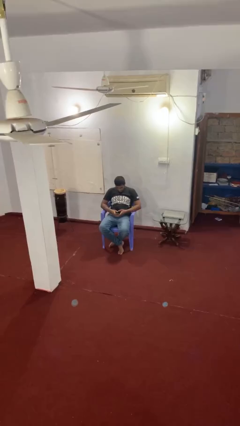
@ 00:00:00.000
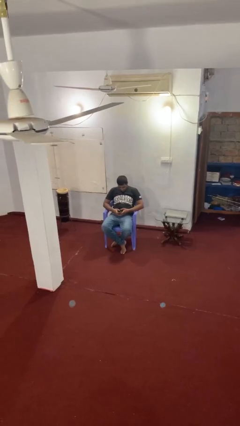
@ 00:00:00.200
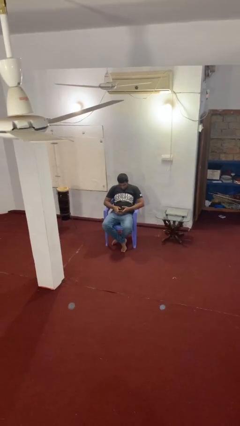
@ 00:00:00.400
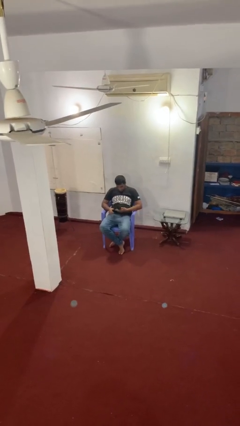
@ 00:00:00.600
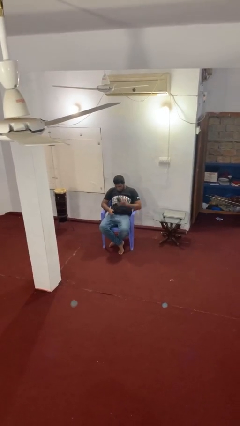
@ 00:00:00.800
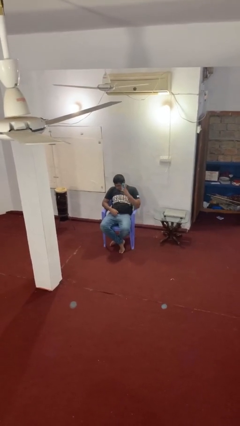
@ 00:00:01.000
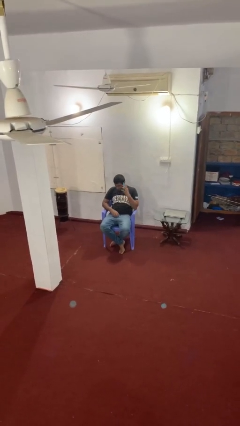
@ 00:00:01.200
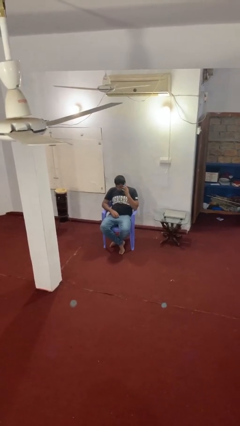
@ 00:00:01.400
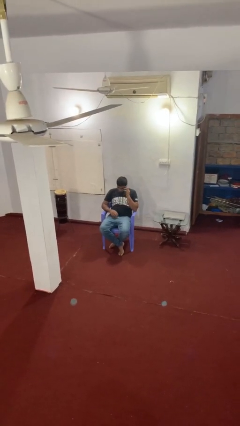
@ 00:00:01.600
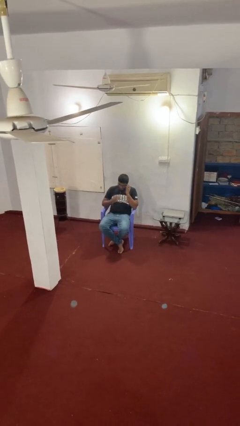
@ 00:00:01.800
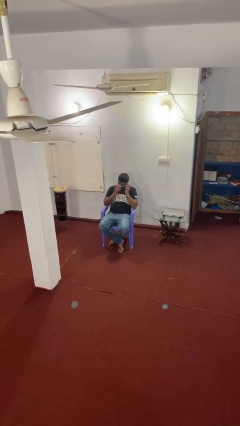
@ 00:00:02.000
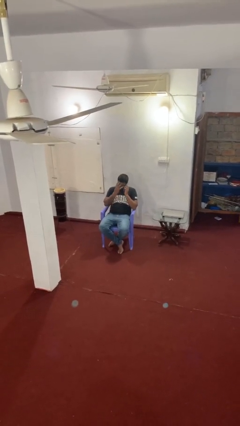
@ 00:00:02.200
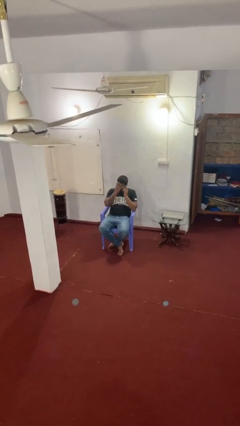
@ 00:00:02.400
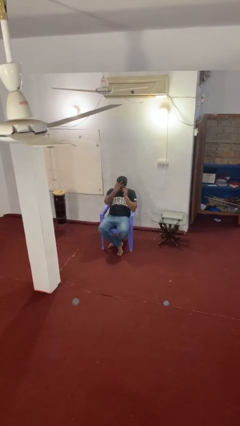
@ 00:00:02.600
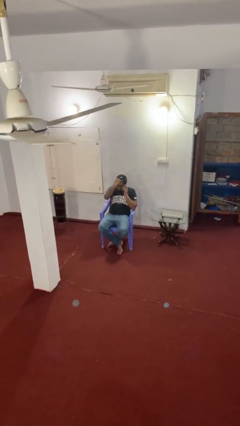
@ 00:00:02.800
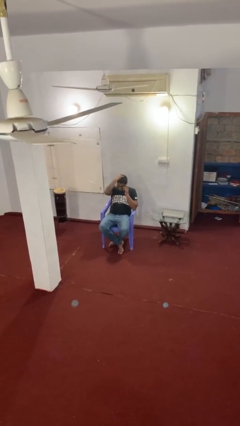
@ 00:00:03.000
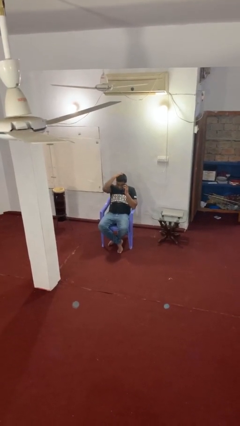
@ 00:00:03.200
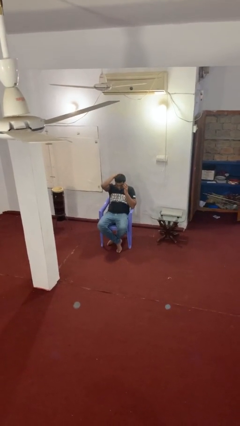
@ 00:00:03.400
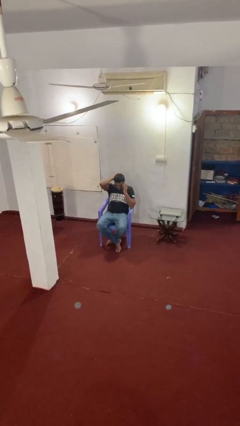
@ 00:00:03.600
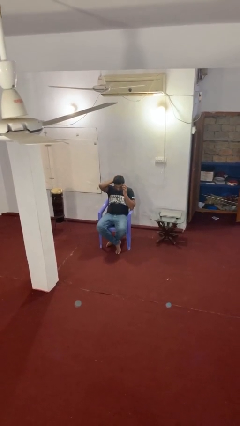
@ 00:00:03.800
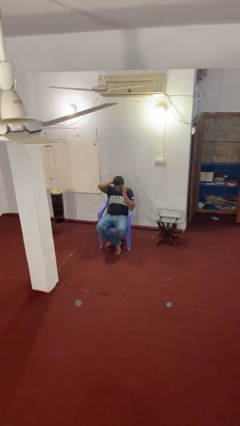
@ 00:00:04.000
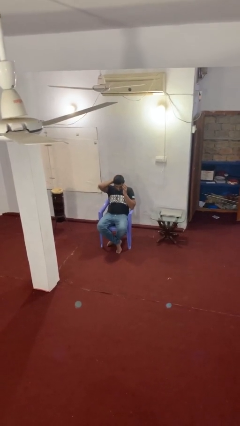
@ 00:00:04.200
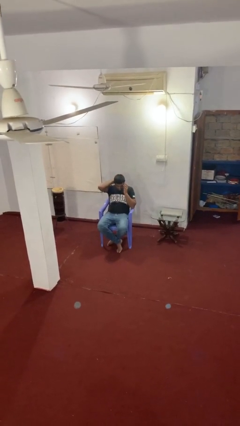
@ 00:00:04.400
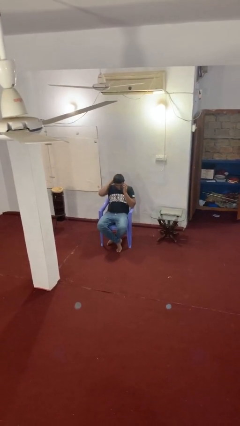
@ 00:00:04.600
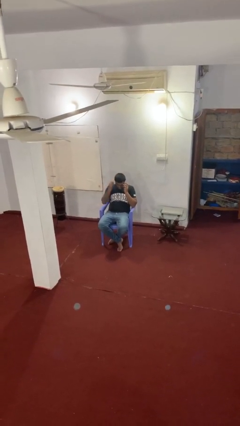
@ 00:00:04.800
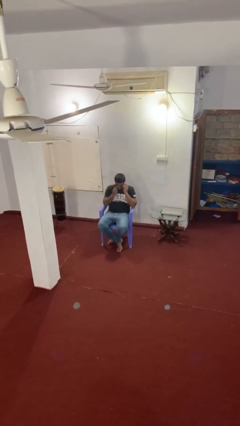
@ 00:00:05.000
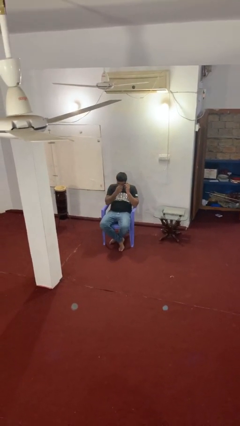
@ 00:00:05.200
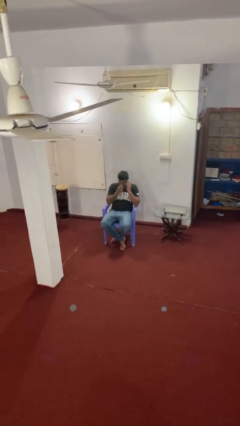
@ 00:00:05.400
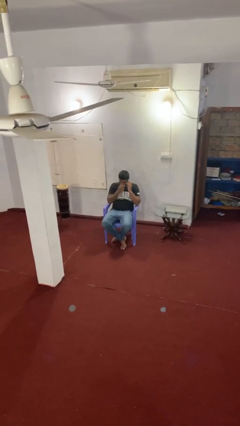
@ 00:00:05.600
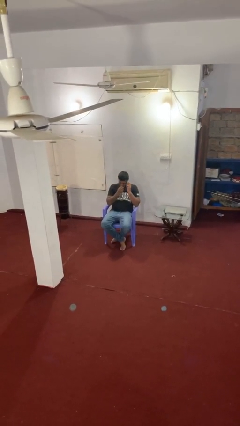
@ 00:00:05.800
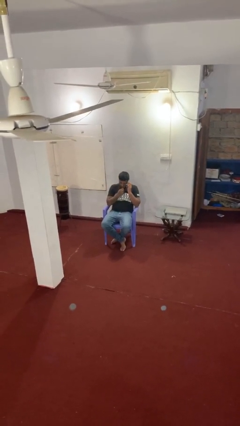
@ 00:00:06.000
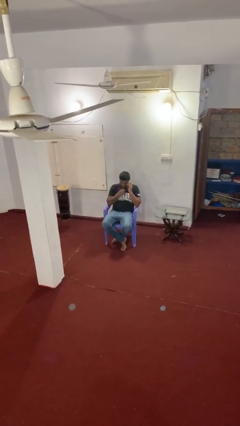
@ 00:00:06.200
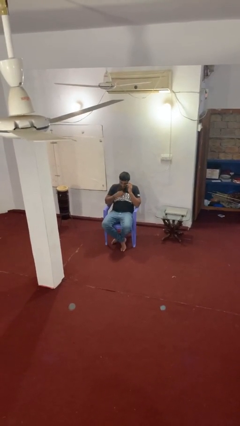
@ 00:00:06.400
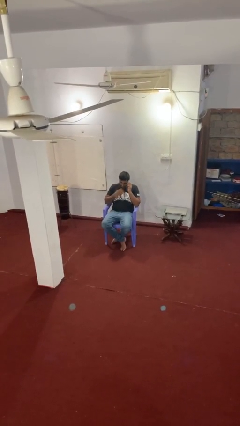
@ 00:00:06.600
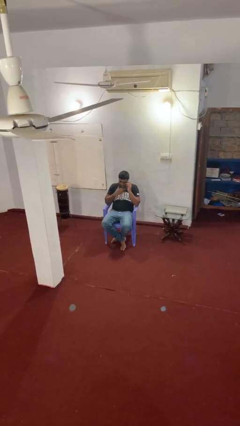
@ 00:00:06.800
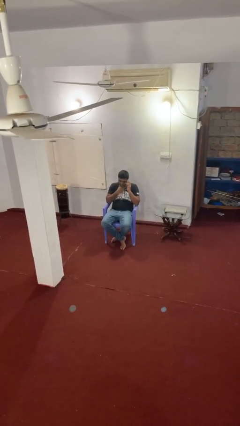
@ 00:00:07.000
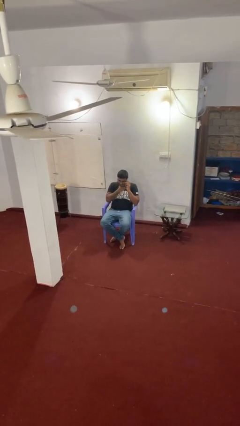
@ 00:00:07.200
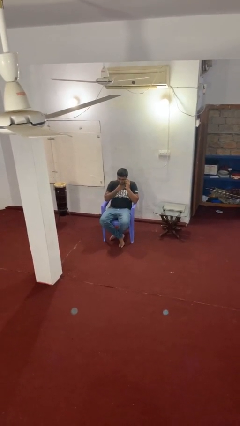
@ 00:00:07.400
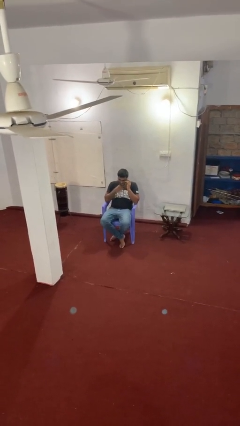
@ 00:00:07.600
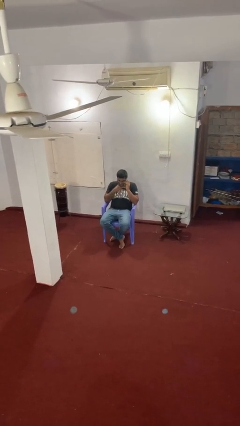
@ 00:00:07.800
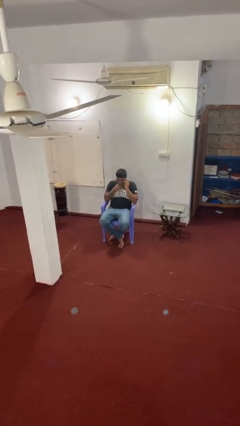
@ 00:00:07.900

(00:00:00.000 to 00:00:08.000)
person talks on phone

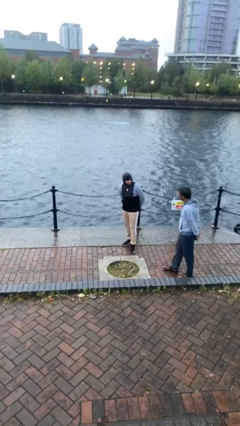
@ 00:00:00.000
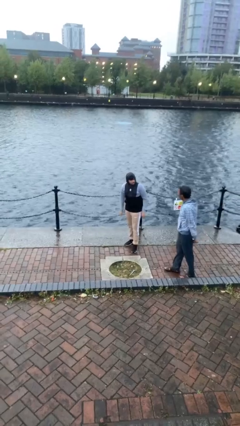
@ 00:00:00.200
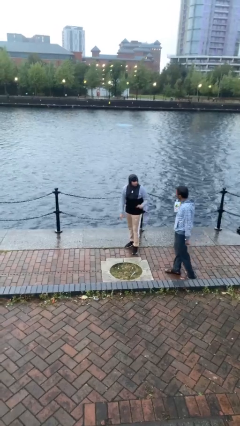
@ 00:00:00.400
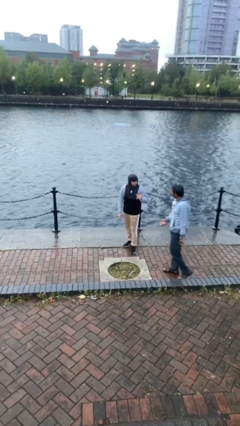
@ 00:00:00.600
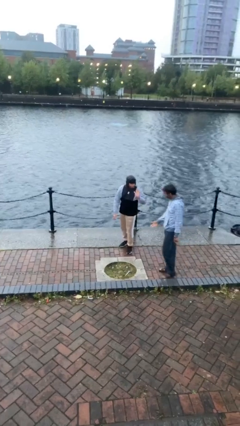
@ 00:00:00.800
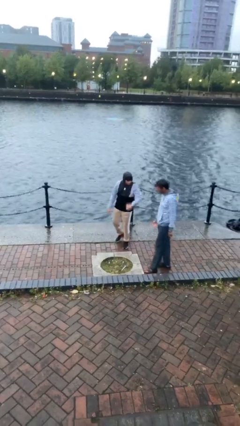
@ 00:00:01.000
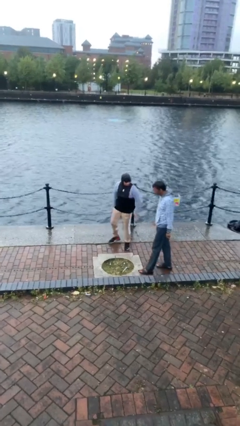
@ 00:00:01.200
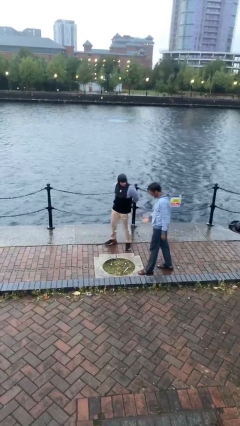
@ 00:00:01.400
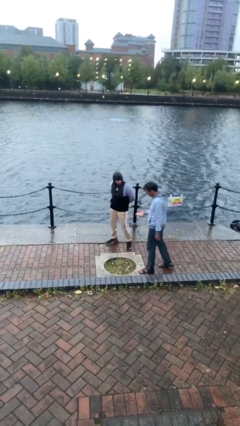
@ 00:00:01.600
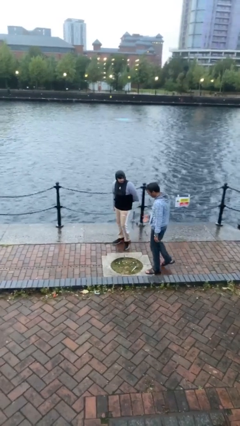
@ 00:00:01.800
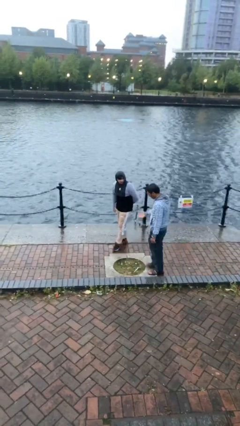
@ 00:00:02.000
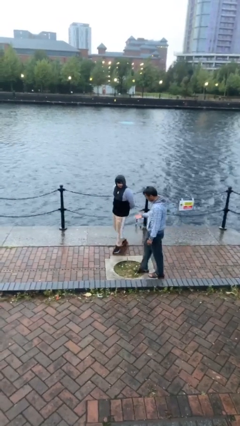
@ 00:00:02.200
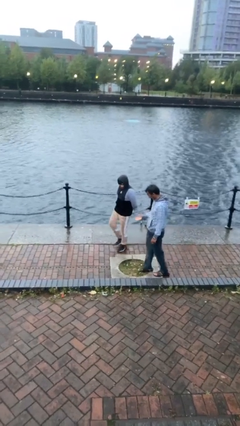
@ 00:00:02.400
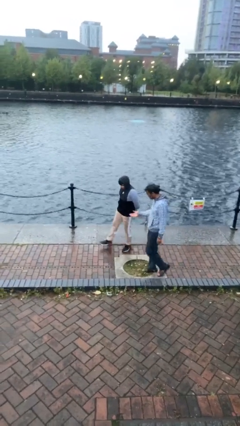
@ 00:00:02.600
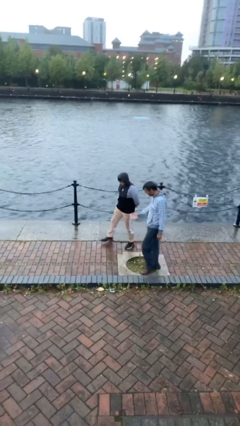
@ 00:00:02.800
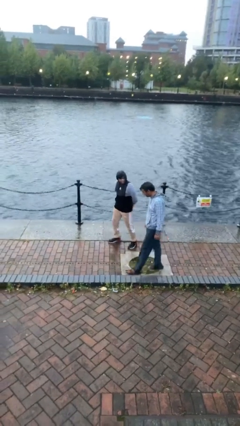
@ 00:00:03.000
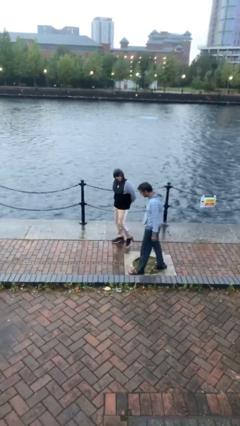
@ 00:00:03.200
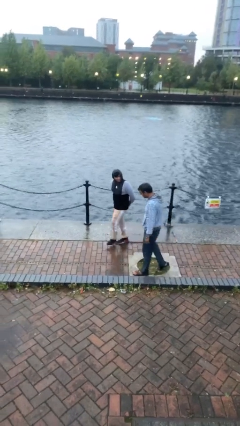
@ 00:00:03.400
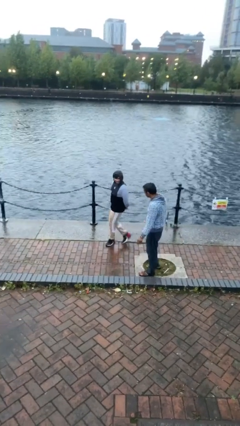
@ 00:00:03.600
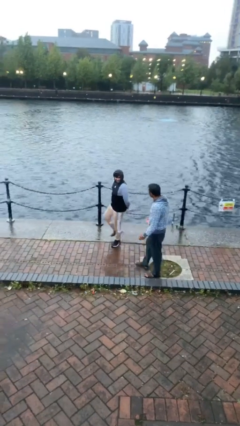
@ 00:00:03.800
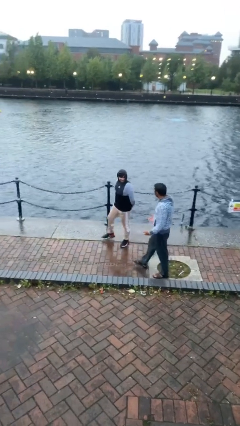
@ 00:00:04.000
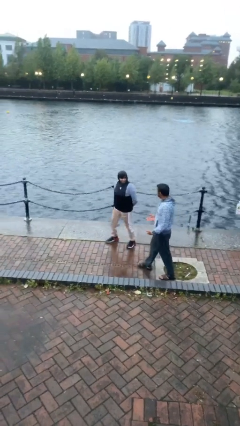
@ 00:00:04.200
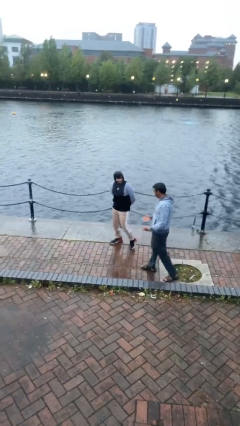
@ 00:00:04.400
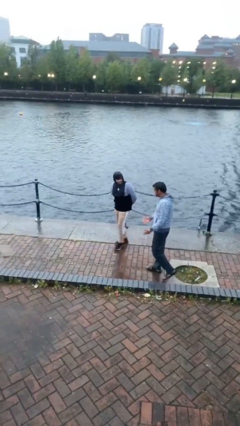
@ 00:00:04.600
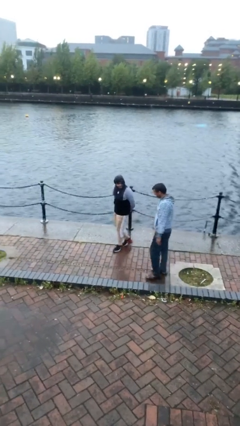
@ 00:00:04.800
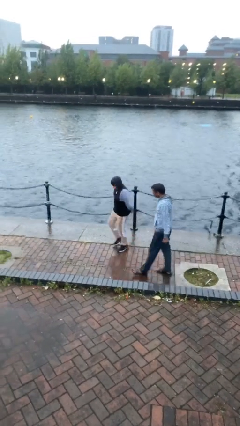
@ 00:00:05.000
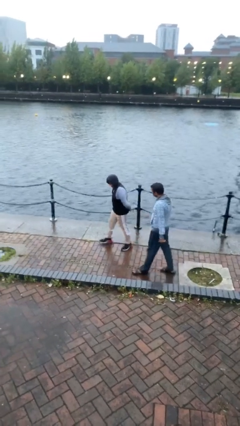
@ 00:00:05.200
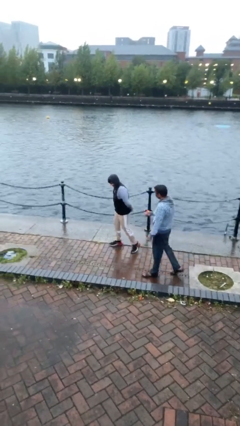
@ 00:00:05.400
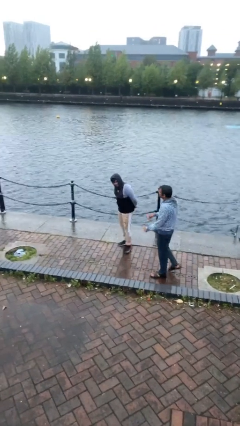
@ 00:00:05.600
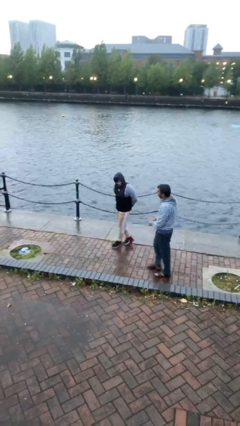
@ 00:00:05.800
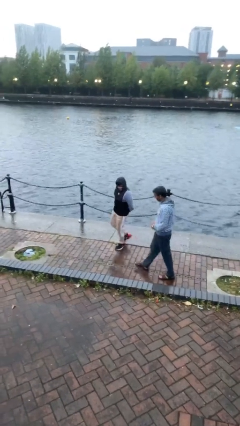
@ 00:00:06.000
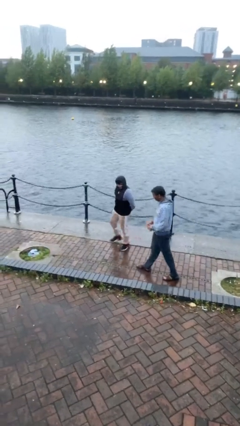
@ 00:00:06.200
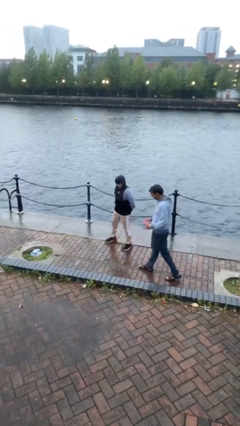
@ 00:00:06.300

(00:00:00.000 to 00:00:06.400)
person talks to person

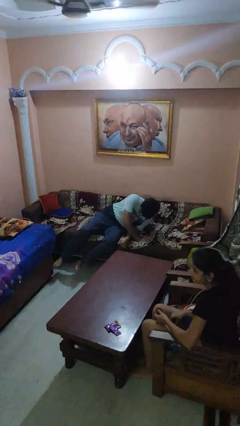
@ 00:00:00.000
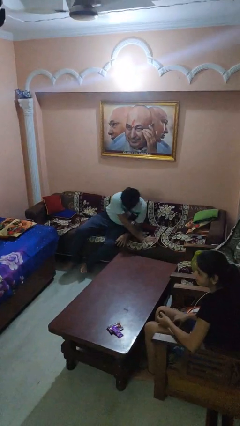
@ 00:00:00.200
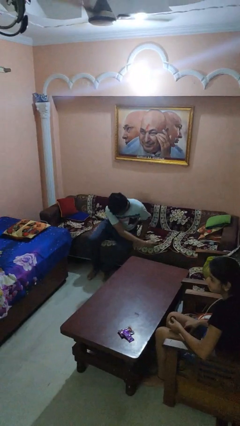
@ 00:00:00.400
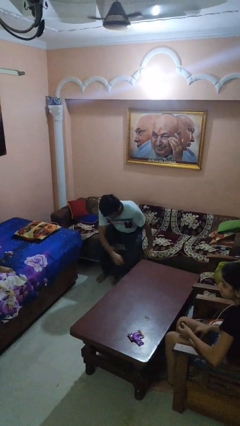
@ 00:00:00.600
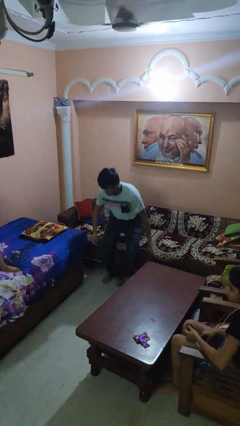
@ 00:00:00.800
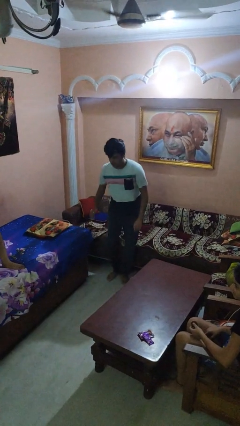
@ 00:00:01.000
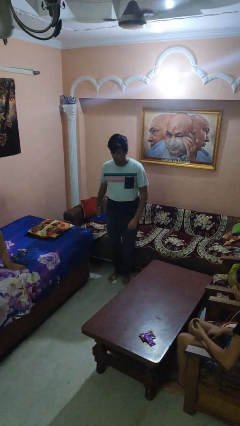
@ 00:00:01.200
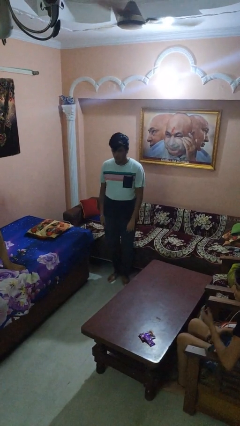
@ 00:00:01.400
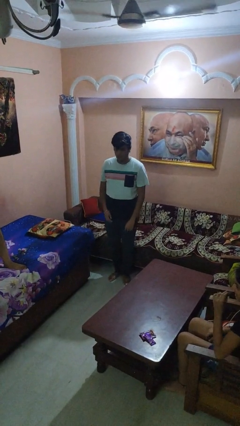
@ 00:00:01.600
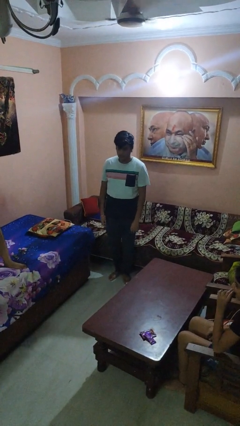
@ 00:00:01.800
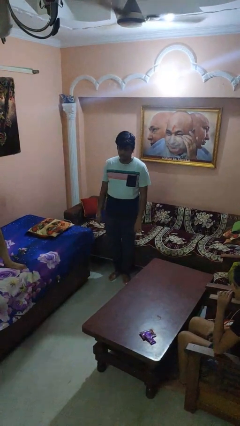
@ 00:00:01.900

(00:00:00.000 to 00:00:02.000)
person stands up

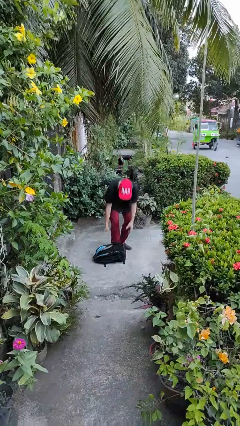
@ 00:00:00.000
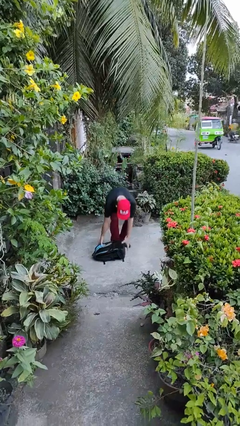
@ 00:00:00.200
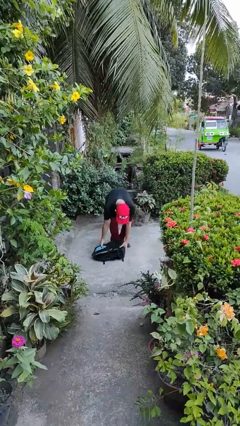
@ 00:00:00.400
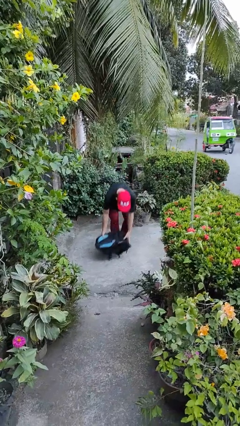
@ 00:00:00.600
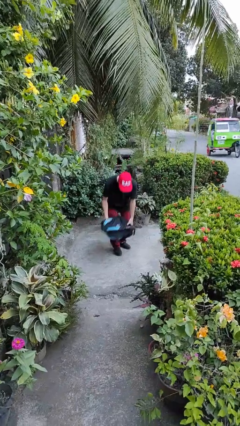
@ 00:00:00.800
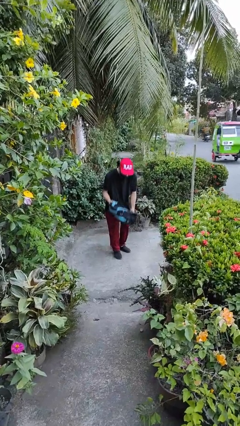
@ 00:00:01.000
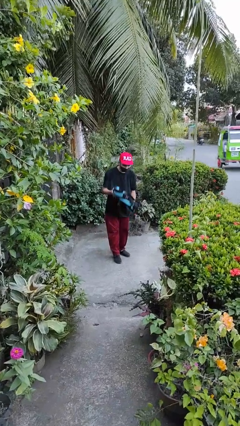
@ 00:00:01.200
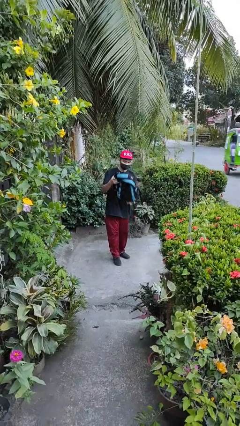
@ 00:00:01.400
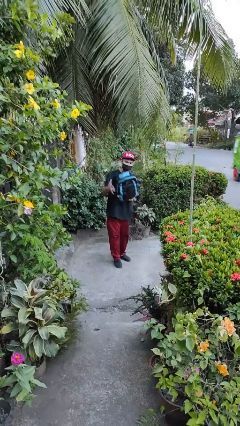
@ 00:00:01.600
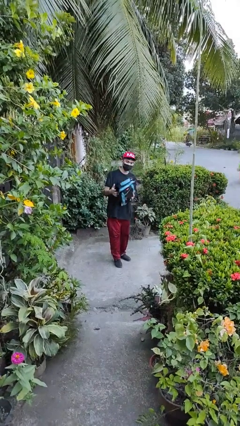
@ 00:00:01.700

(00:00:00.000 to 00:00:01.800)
person picks up object from floor
